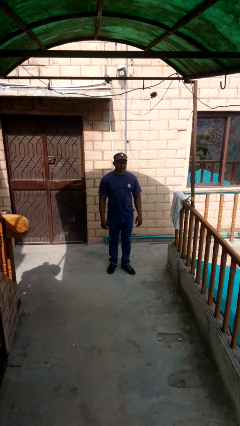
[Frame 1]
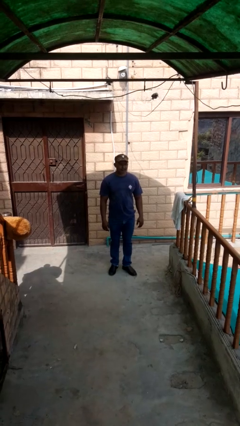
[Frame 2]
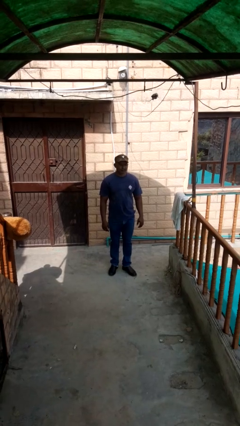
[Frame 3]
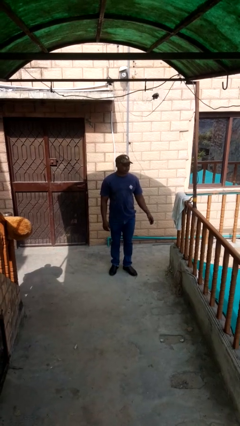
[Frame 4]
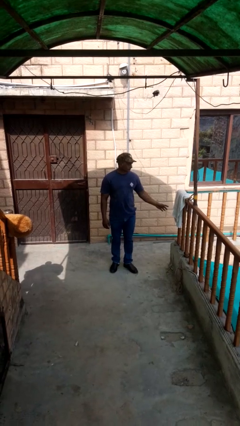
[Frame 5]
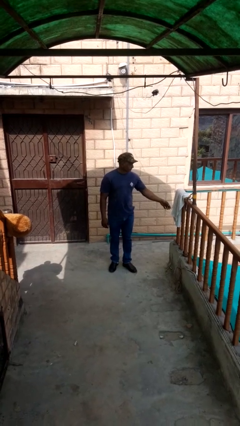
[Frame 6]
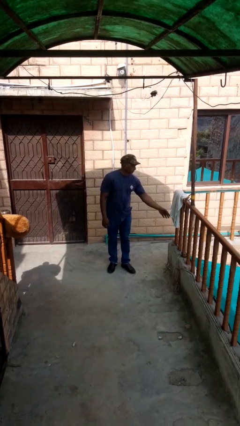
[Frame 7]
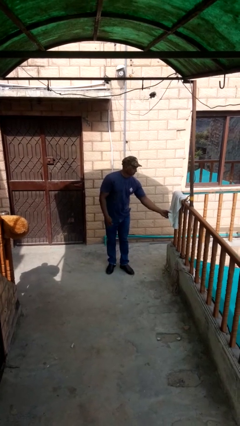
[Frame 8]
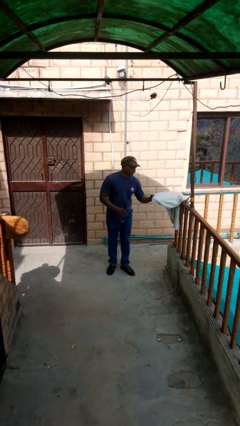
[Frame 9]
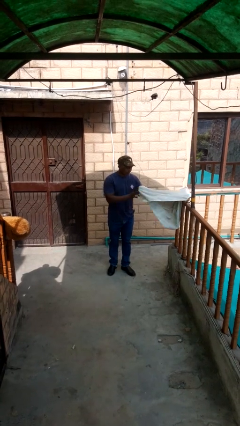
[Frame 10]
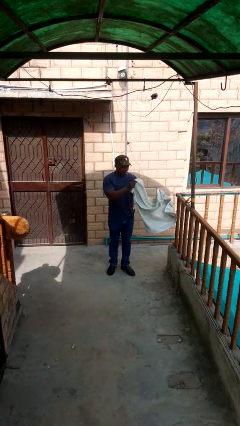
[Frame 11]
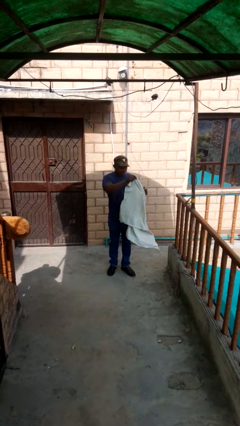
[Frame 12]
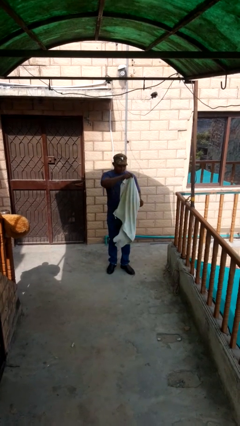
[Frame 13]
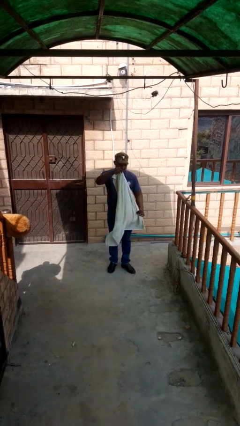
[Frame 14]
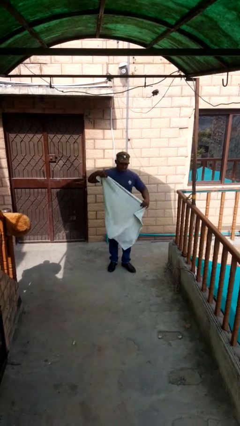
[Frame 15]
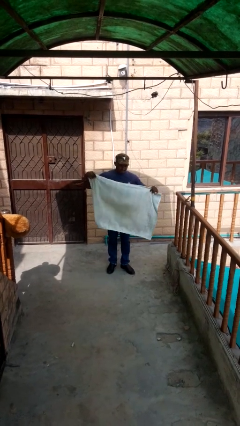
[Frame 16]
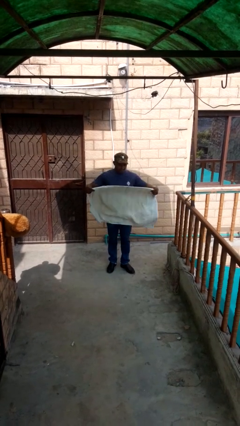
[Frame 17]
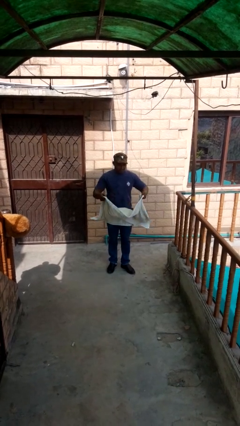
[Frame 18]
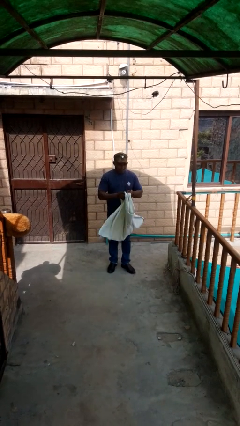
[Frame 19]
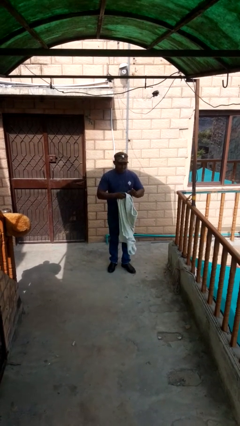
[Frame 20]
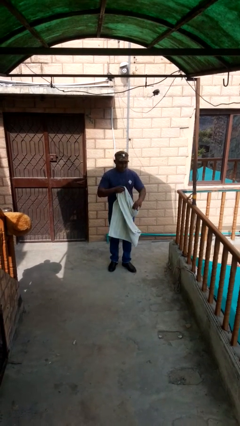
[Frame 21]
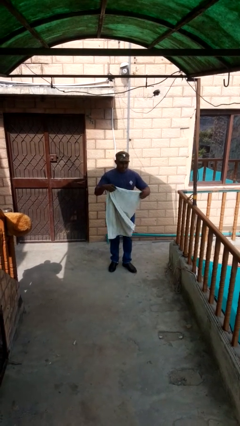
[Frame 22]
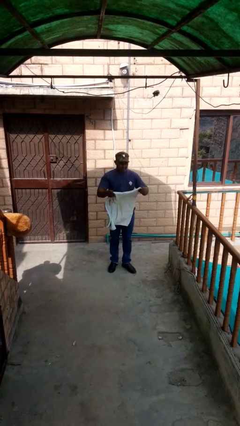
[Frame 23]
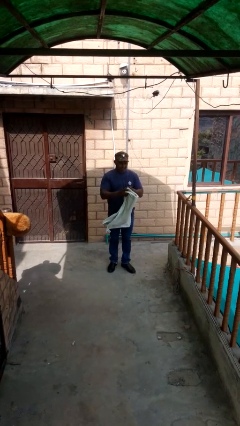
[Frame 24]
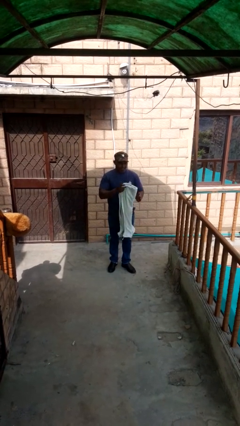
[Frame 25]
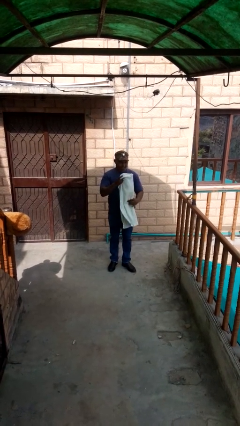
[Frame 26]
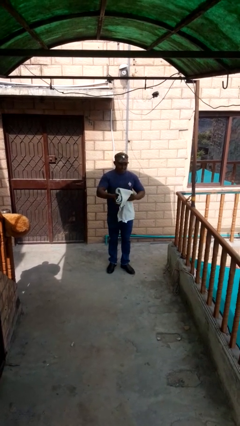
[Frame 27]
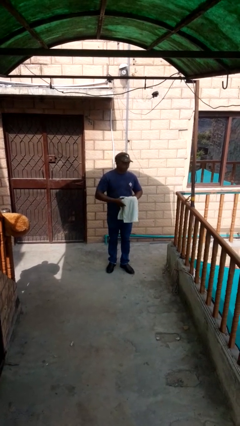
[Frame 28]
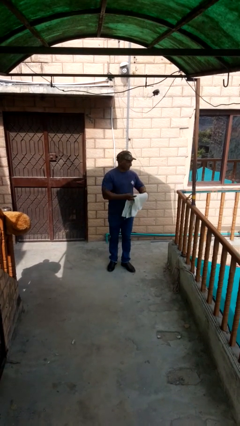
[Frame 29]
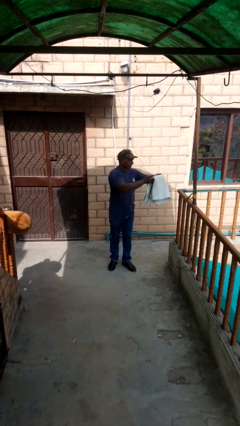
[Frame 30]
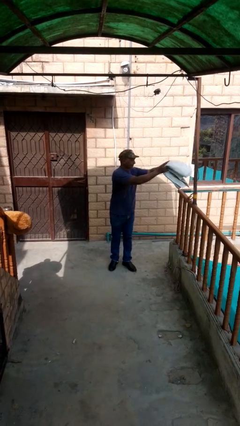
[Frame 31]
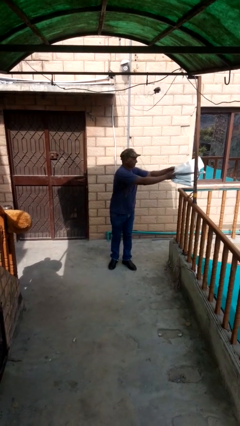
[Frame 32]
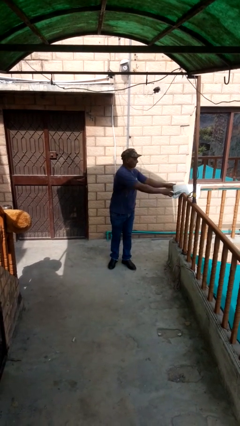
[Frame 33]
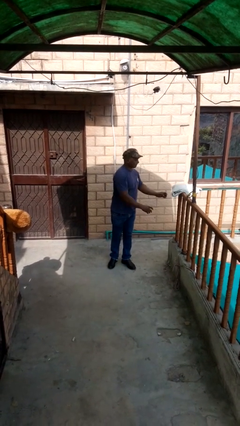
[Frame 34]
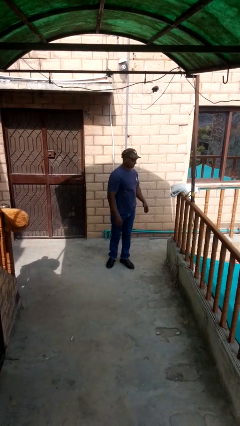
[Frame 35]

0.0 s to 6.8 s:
person folds towel

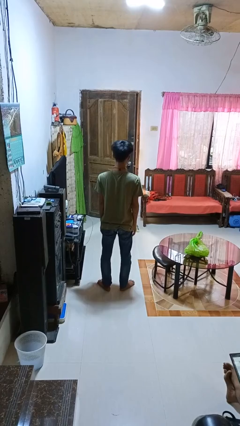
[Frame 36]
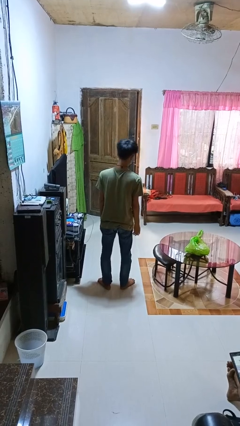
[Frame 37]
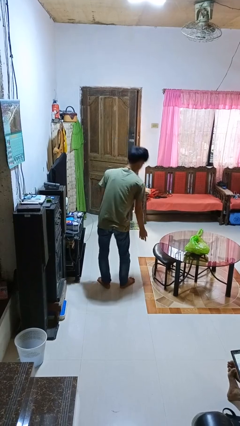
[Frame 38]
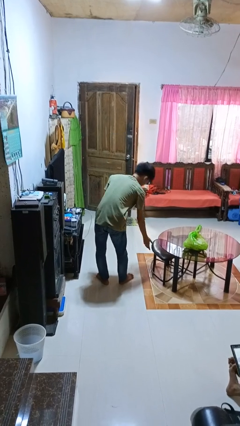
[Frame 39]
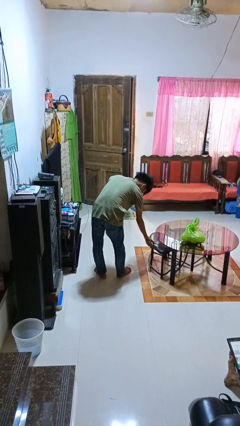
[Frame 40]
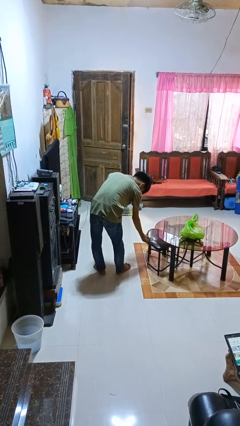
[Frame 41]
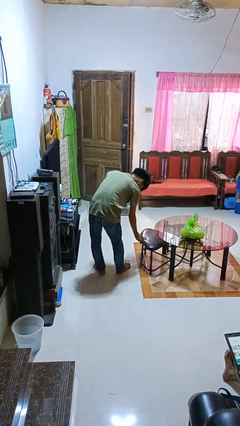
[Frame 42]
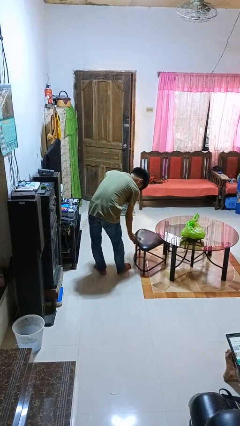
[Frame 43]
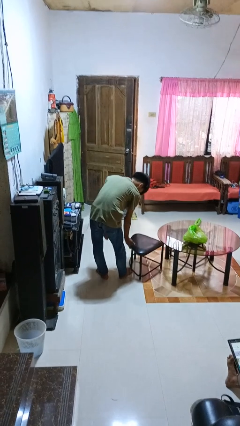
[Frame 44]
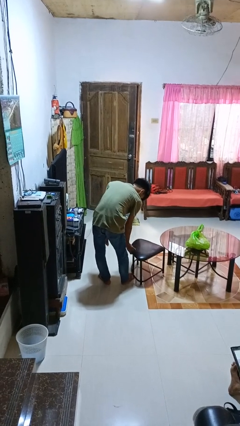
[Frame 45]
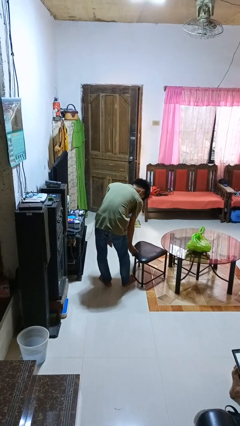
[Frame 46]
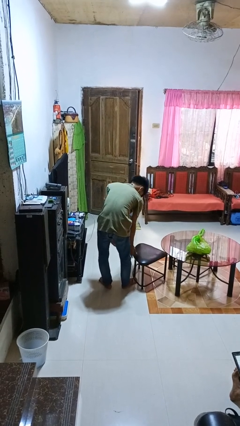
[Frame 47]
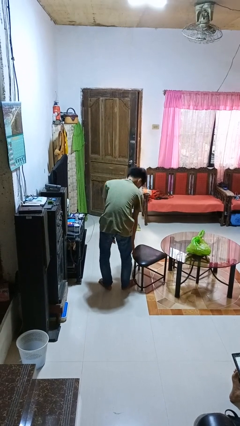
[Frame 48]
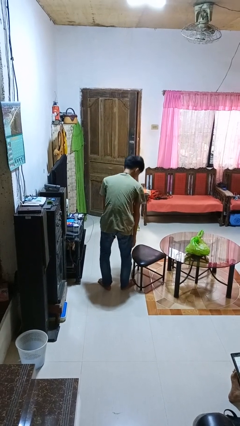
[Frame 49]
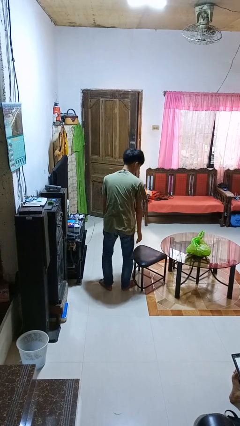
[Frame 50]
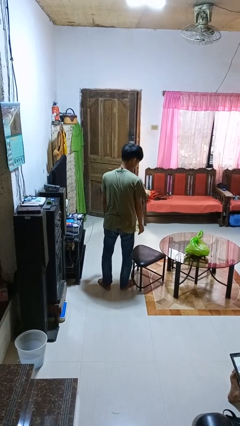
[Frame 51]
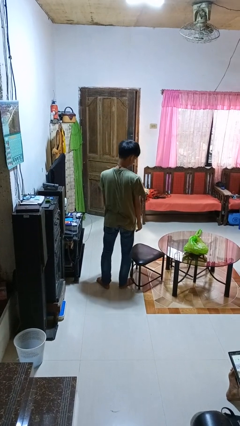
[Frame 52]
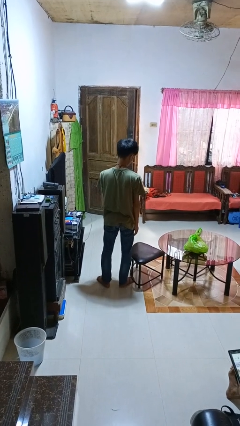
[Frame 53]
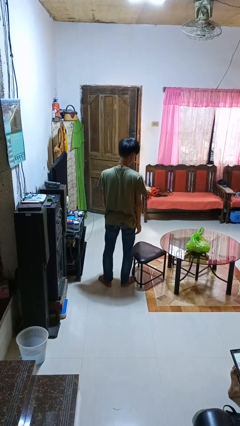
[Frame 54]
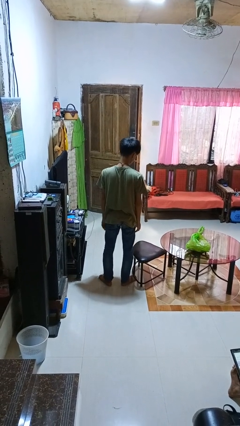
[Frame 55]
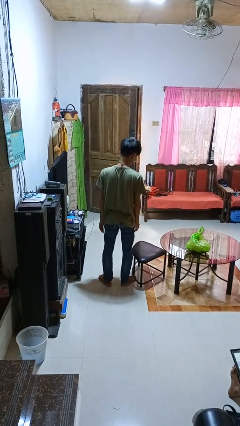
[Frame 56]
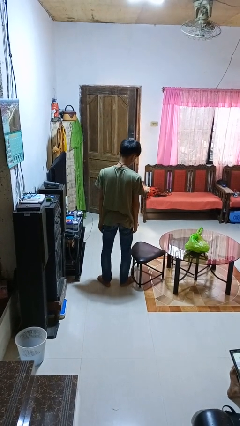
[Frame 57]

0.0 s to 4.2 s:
person pulls out chair

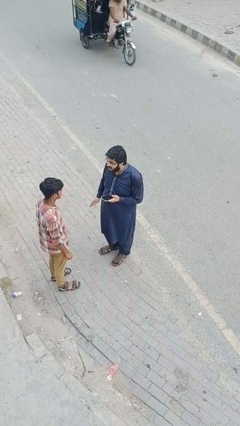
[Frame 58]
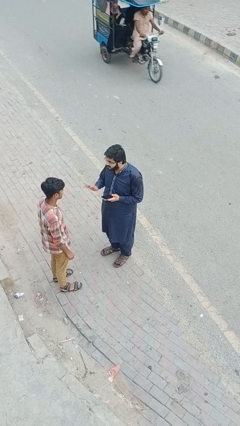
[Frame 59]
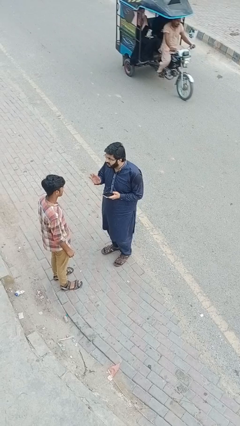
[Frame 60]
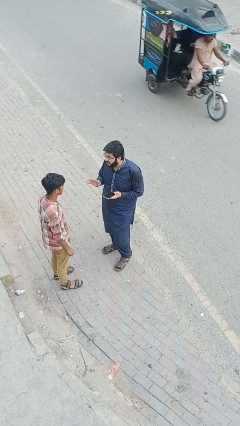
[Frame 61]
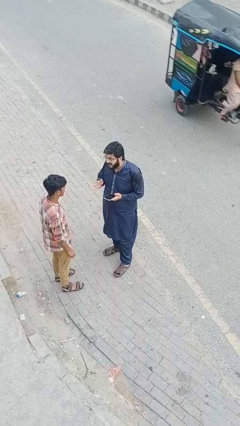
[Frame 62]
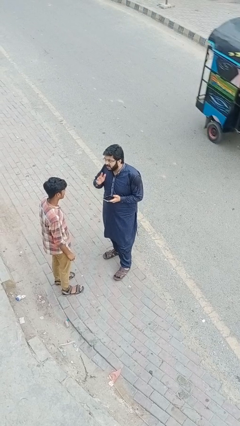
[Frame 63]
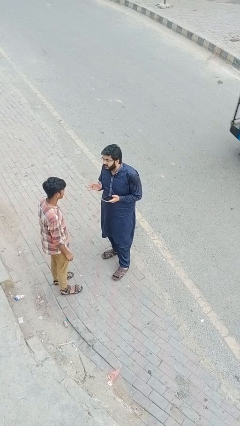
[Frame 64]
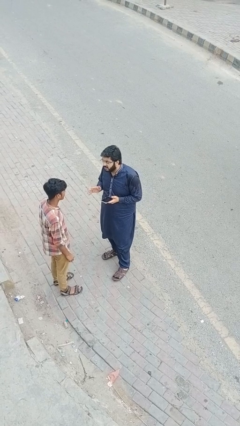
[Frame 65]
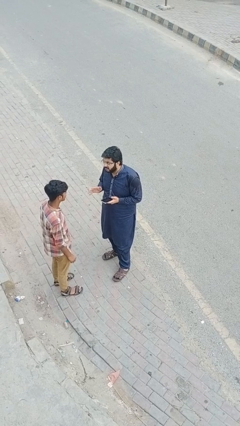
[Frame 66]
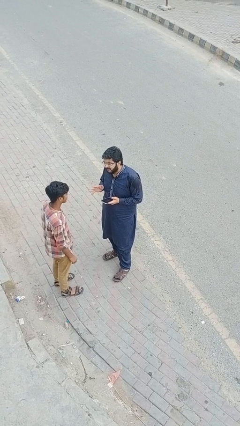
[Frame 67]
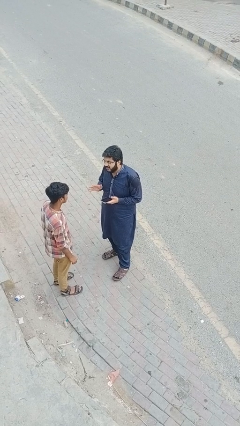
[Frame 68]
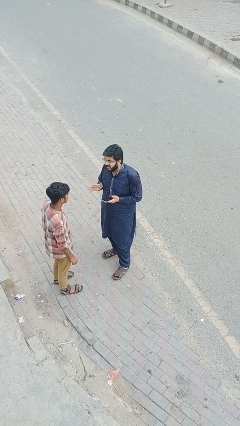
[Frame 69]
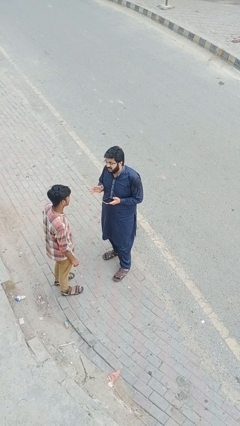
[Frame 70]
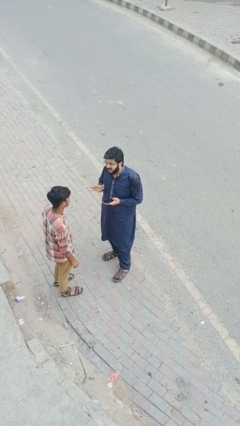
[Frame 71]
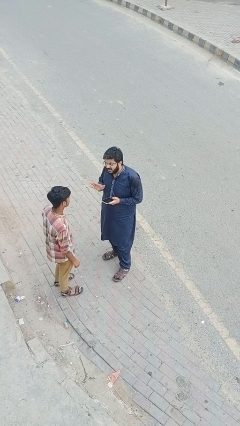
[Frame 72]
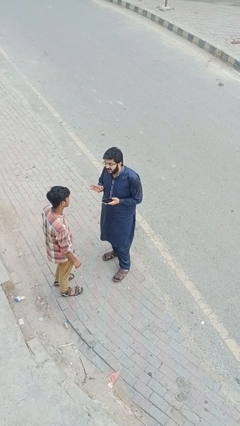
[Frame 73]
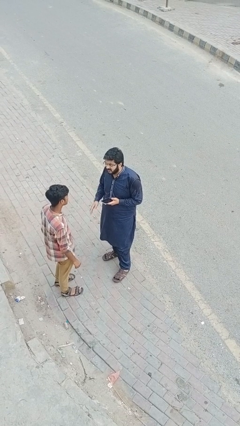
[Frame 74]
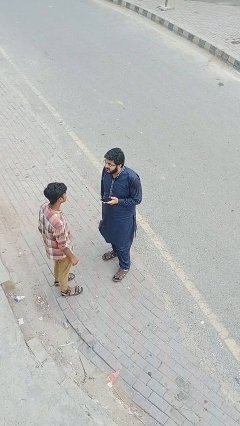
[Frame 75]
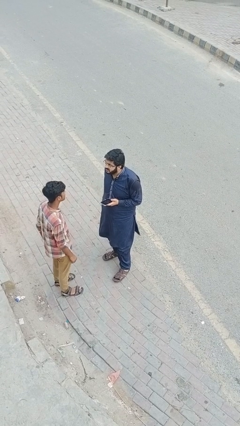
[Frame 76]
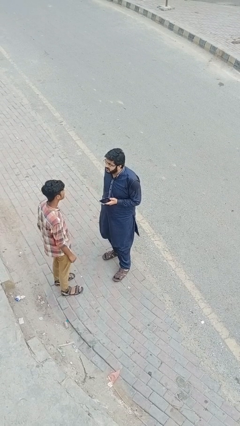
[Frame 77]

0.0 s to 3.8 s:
person talks to person

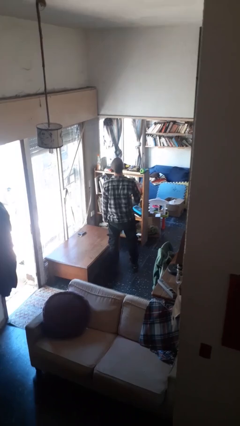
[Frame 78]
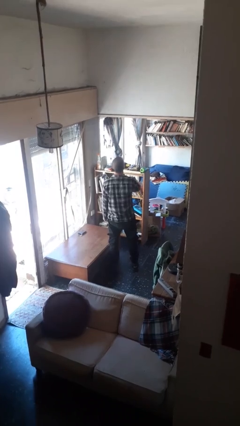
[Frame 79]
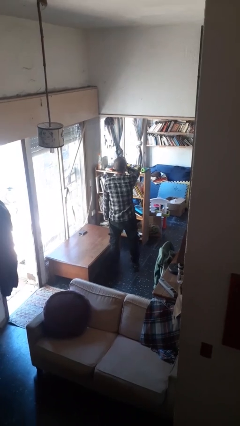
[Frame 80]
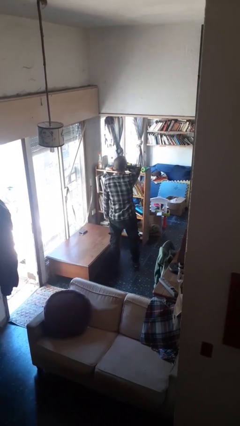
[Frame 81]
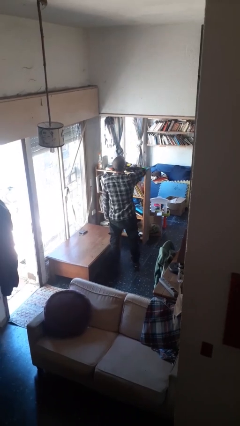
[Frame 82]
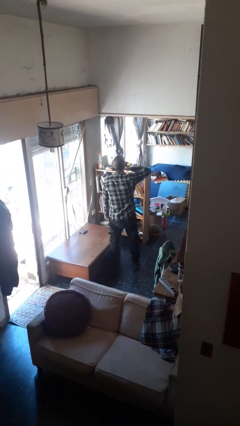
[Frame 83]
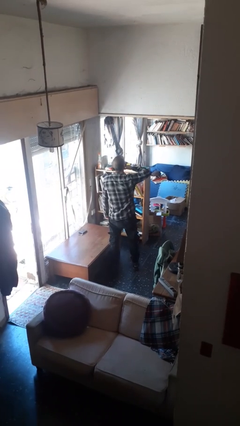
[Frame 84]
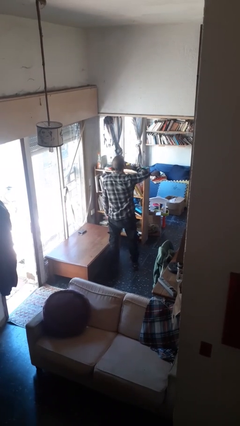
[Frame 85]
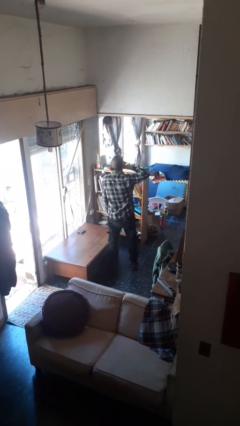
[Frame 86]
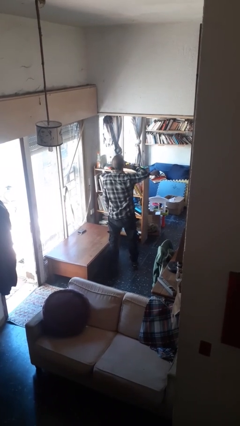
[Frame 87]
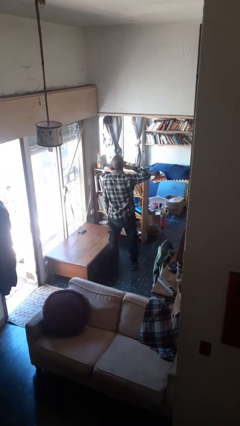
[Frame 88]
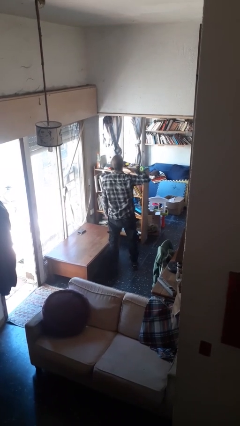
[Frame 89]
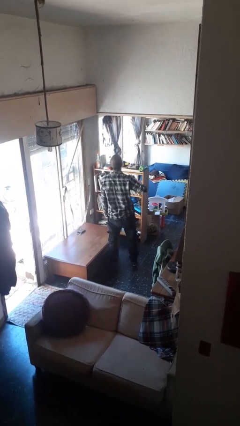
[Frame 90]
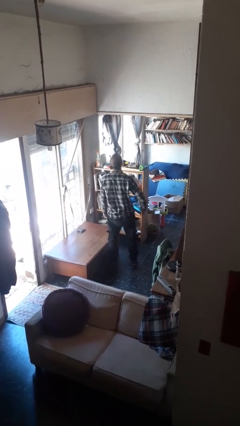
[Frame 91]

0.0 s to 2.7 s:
person gestures cut
